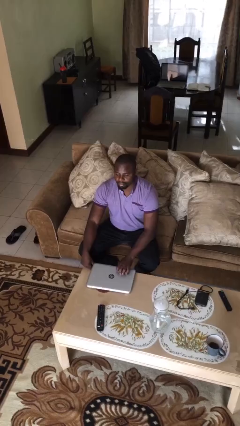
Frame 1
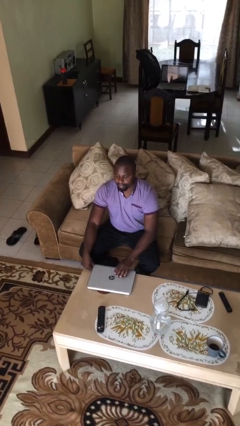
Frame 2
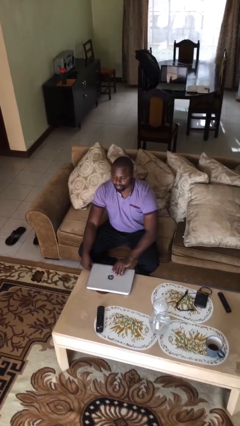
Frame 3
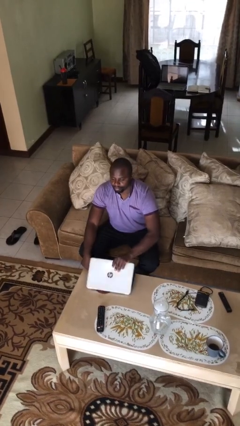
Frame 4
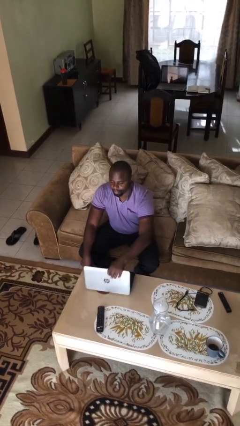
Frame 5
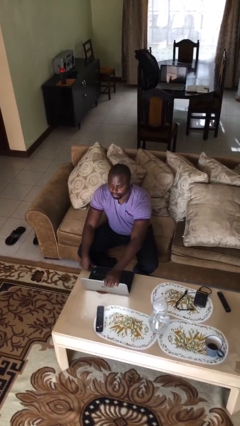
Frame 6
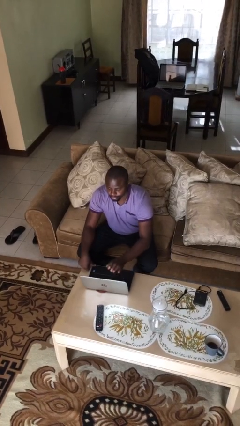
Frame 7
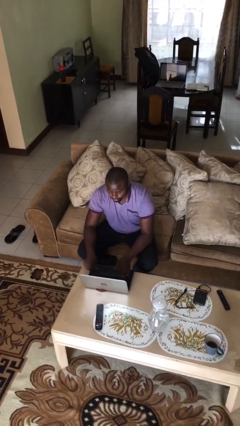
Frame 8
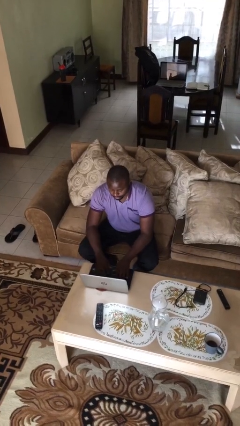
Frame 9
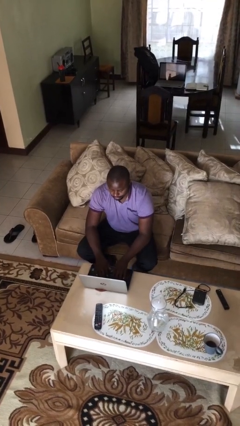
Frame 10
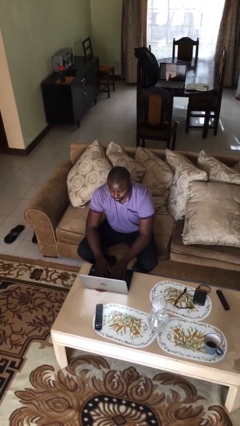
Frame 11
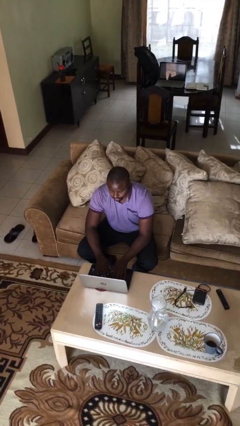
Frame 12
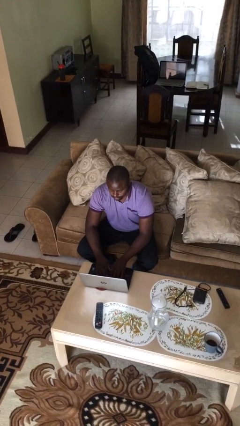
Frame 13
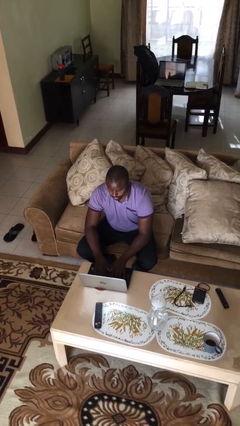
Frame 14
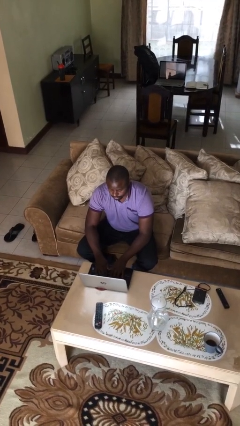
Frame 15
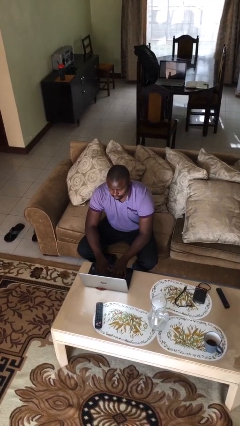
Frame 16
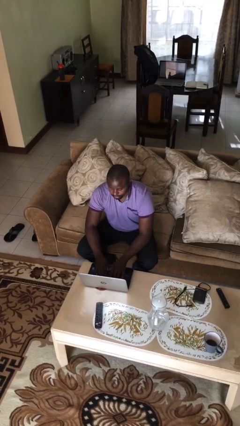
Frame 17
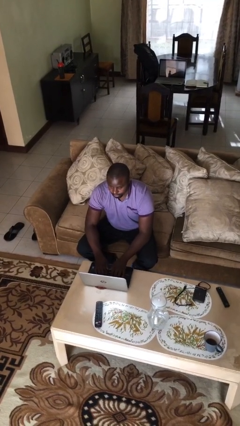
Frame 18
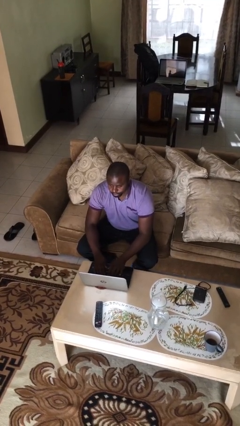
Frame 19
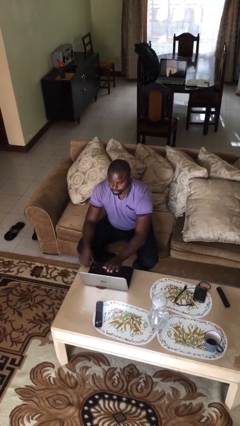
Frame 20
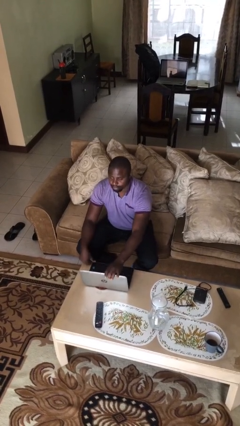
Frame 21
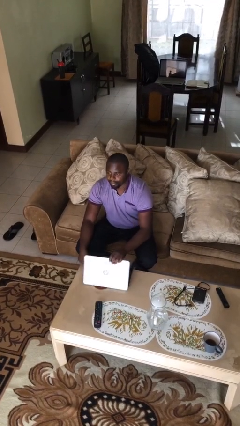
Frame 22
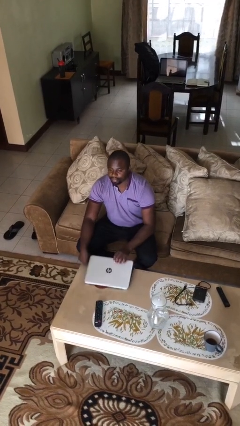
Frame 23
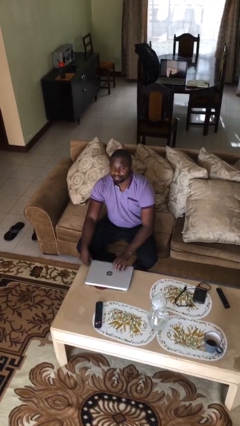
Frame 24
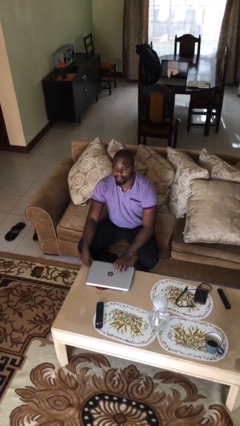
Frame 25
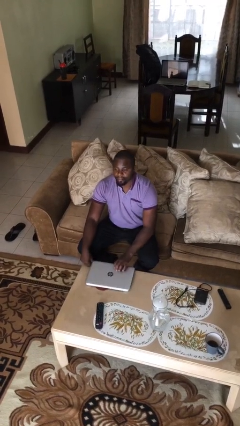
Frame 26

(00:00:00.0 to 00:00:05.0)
person interacts with laptop

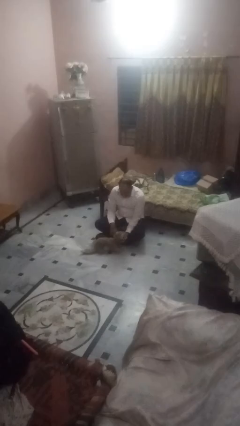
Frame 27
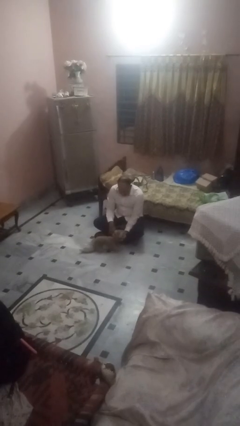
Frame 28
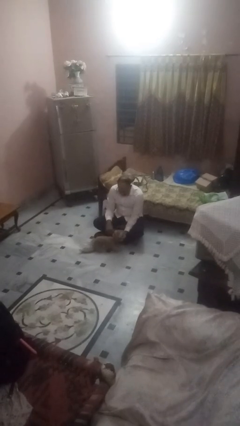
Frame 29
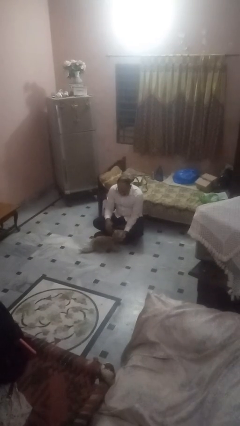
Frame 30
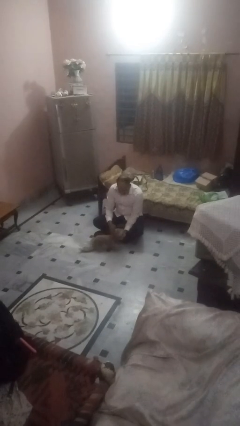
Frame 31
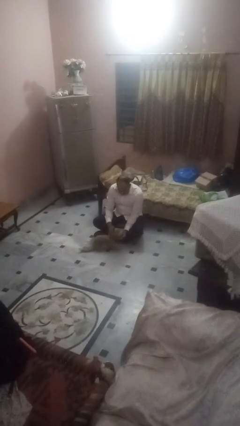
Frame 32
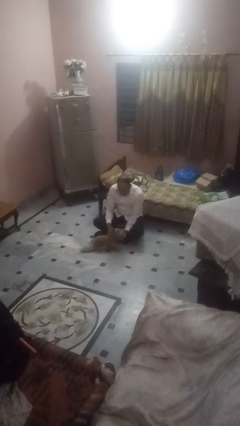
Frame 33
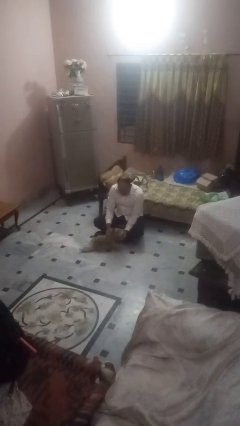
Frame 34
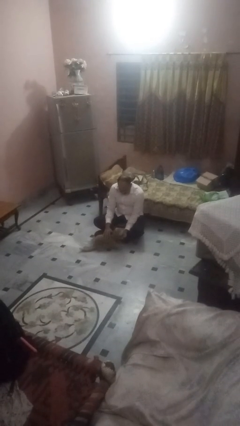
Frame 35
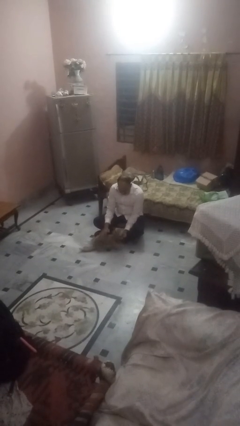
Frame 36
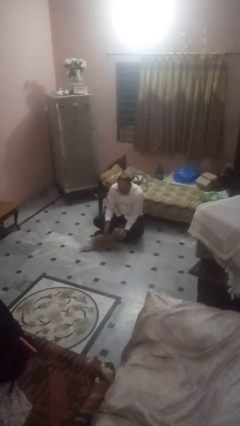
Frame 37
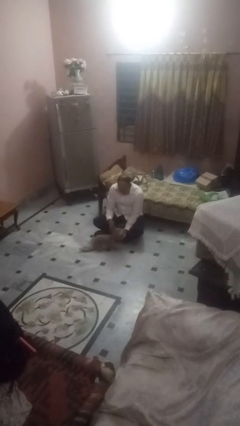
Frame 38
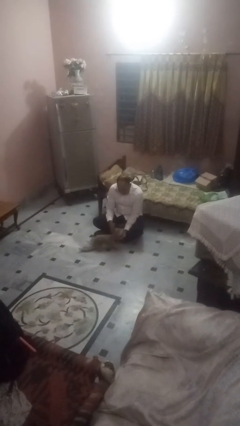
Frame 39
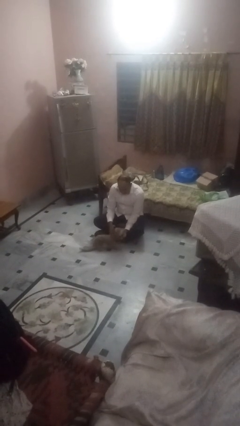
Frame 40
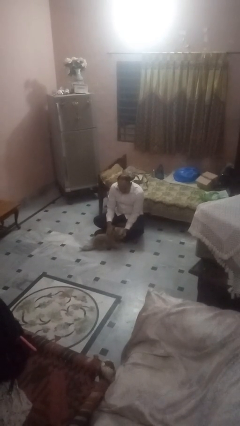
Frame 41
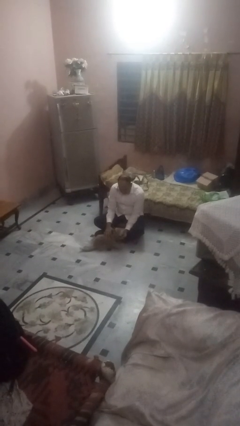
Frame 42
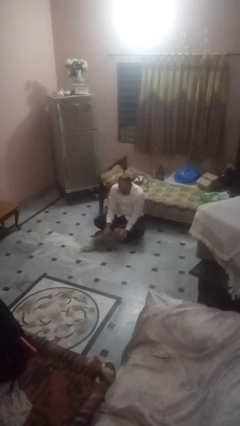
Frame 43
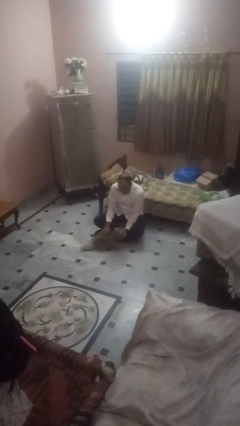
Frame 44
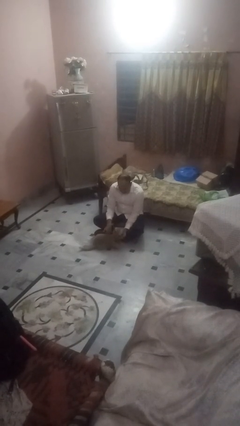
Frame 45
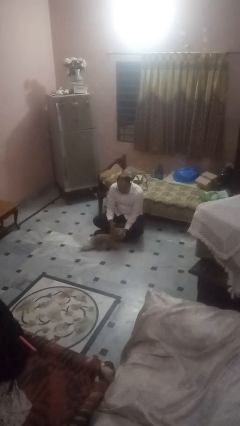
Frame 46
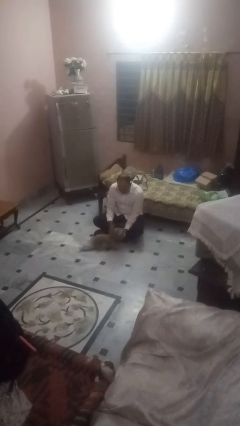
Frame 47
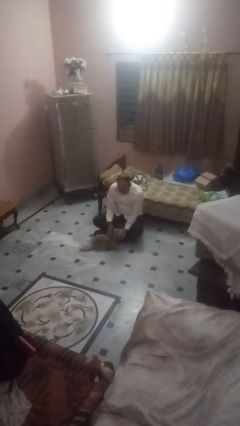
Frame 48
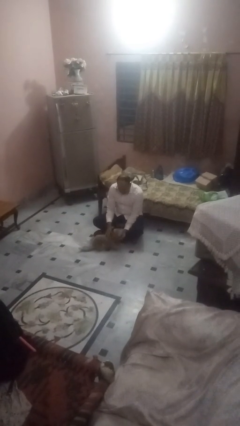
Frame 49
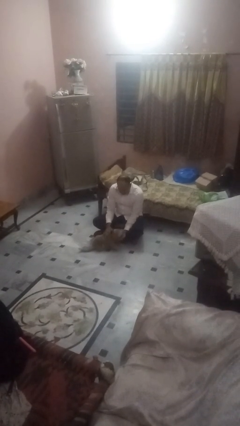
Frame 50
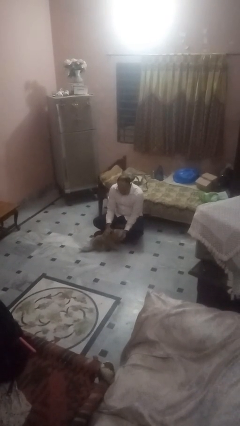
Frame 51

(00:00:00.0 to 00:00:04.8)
person pets dog

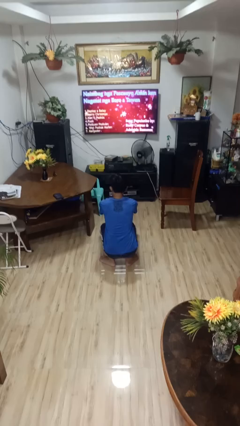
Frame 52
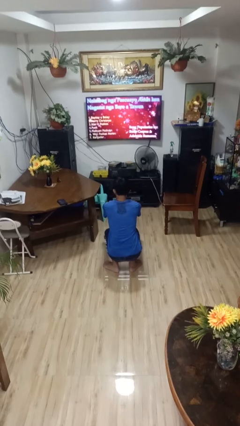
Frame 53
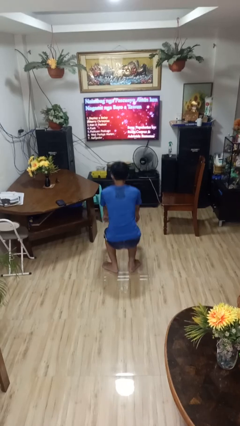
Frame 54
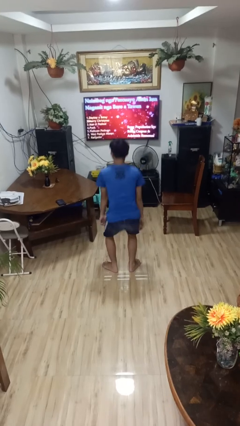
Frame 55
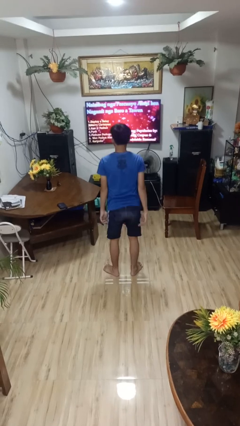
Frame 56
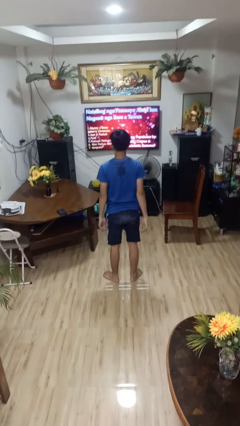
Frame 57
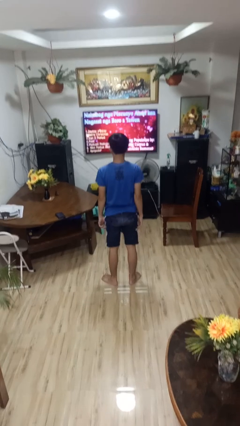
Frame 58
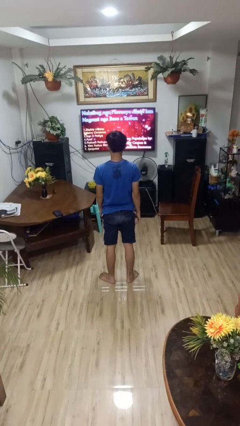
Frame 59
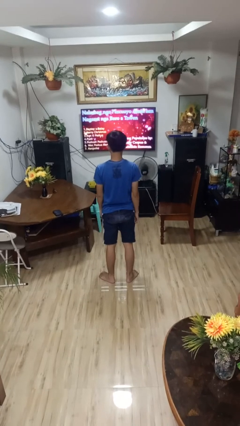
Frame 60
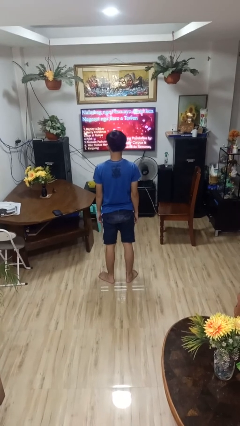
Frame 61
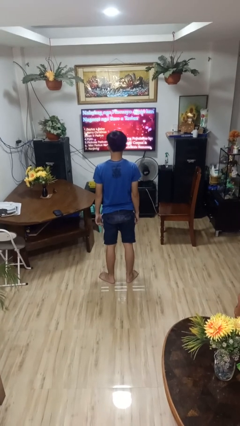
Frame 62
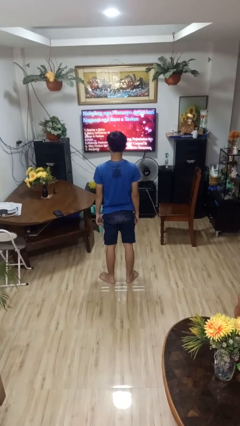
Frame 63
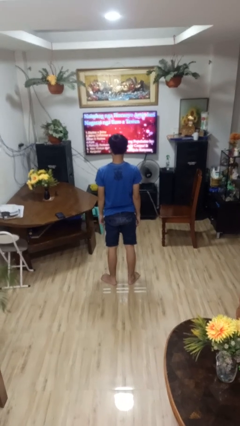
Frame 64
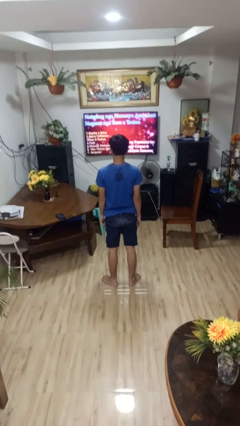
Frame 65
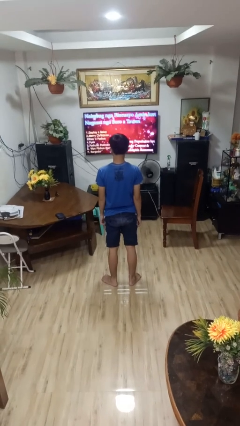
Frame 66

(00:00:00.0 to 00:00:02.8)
person stands up

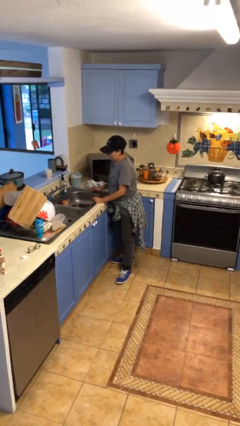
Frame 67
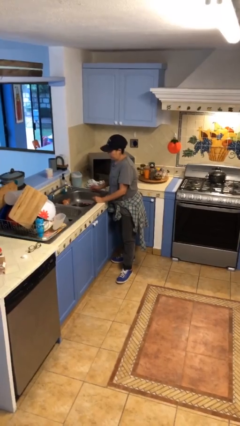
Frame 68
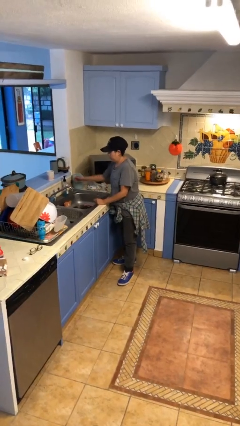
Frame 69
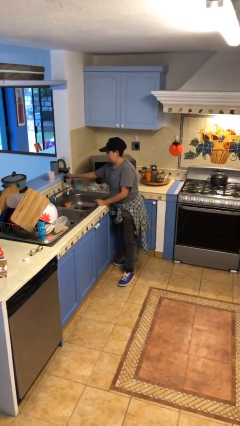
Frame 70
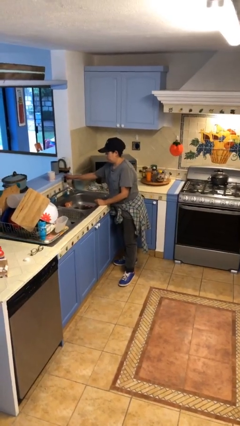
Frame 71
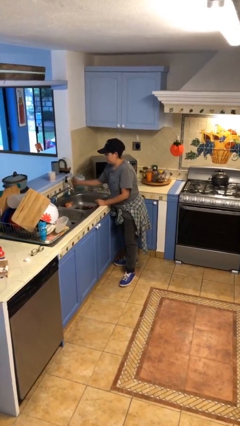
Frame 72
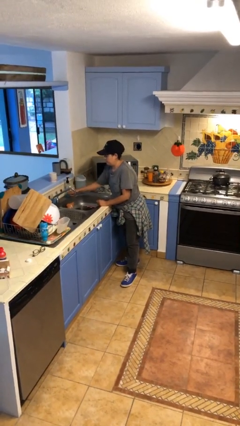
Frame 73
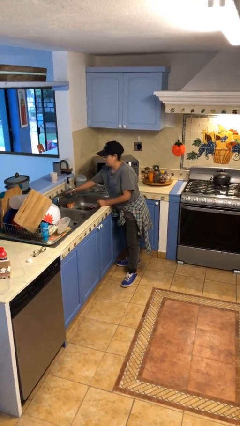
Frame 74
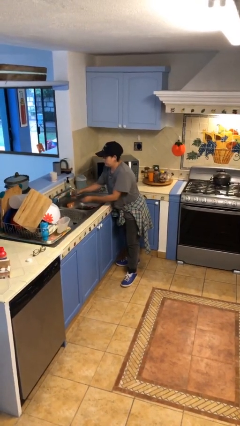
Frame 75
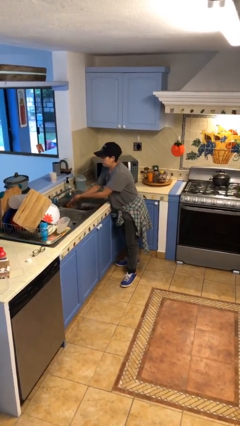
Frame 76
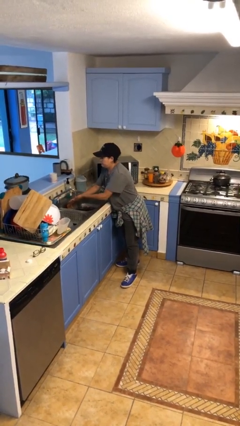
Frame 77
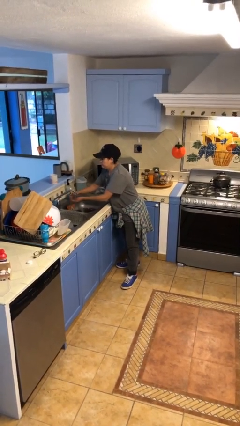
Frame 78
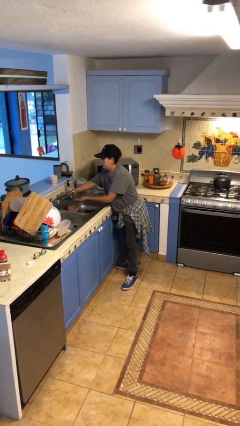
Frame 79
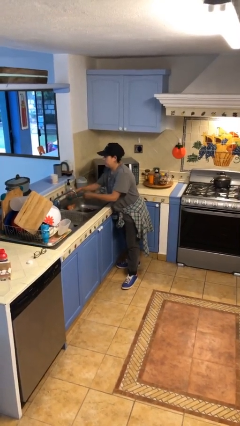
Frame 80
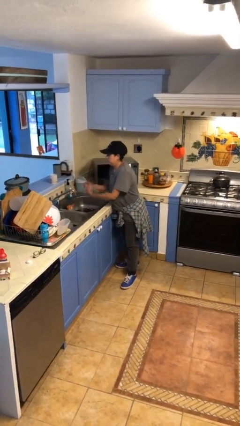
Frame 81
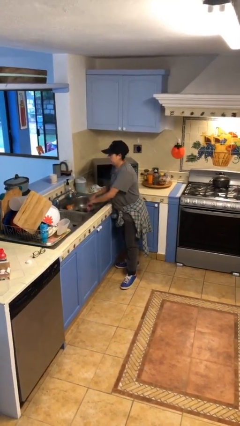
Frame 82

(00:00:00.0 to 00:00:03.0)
person washes hands

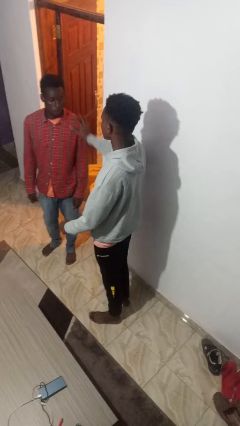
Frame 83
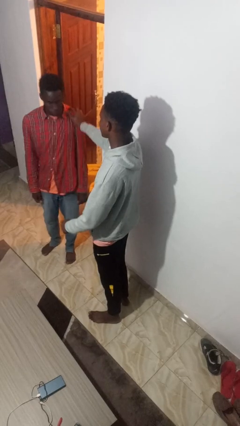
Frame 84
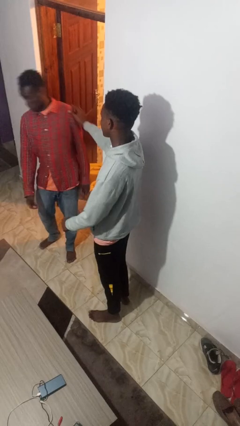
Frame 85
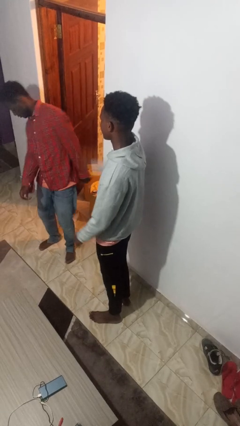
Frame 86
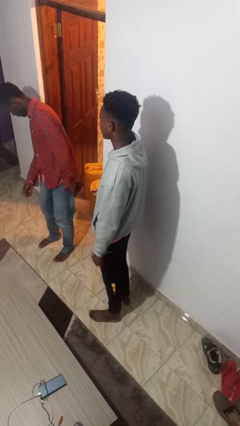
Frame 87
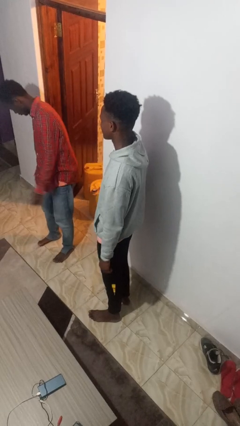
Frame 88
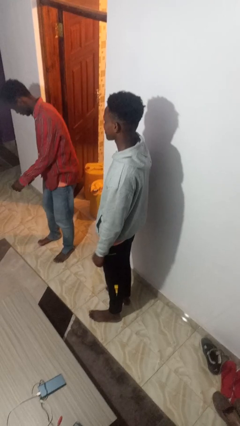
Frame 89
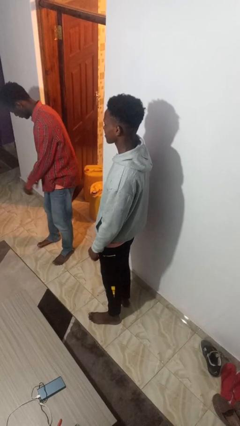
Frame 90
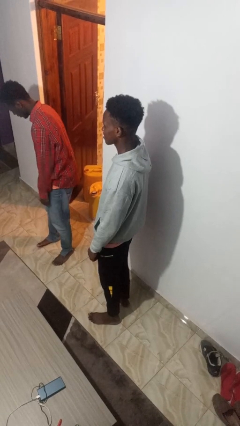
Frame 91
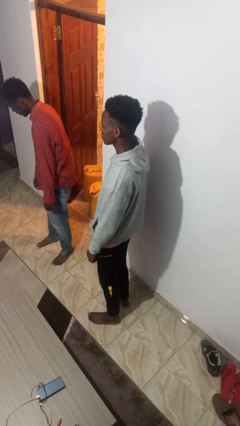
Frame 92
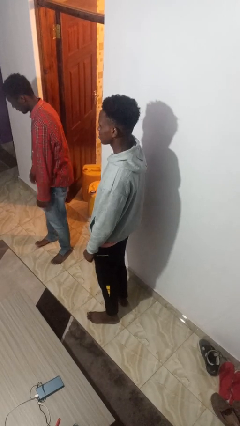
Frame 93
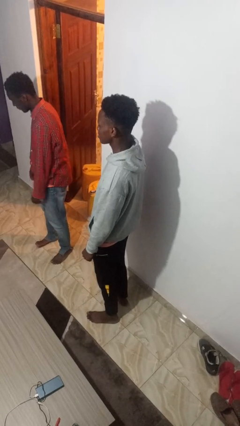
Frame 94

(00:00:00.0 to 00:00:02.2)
person shoves person
